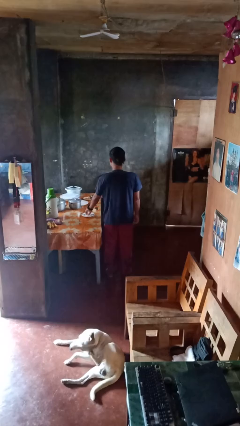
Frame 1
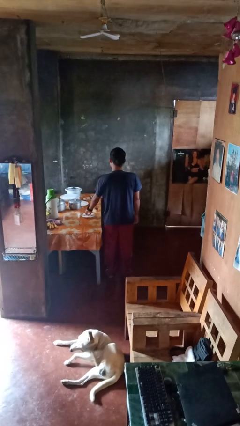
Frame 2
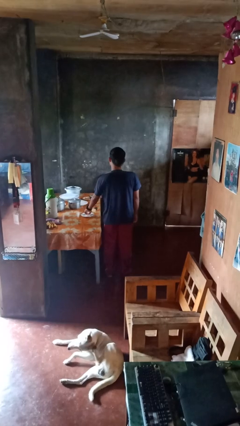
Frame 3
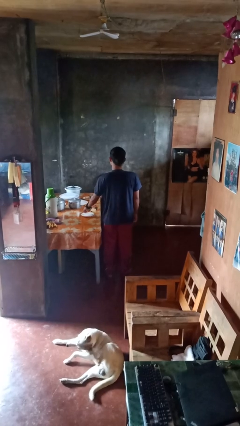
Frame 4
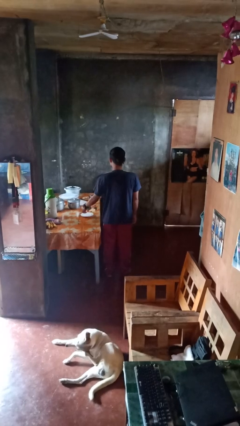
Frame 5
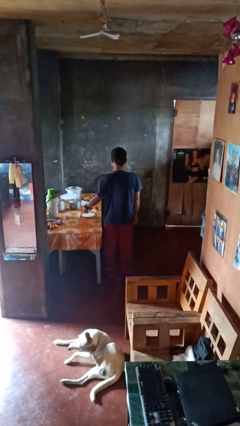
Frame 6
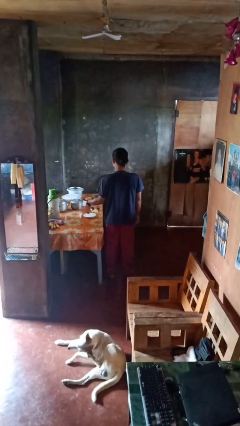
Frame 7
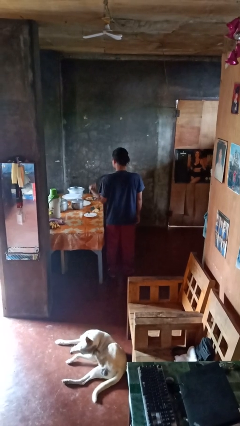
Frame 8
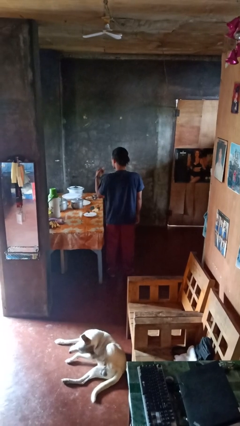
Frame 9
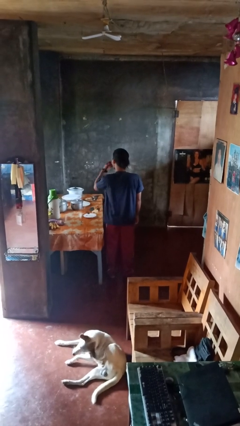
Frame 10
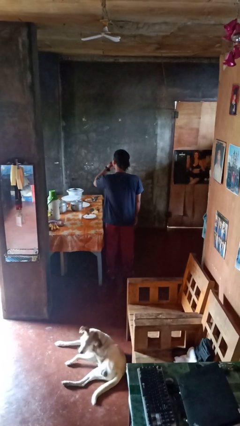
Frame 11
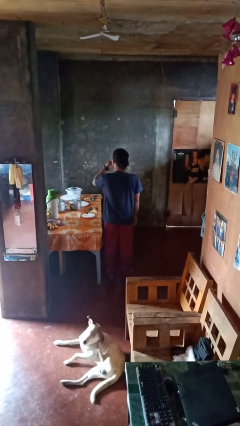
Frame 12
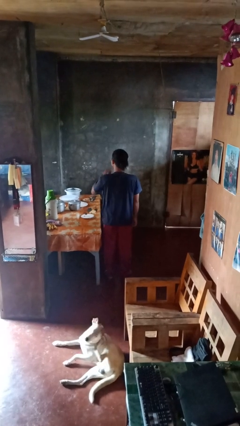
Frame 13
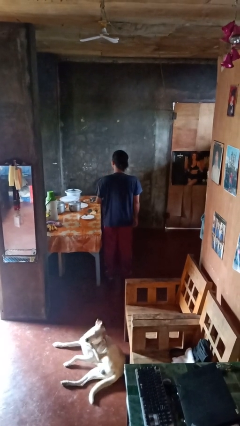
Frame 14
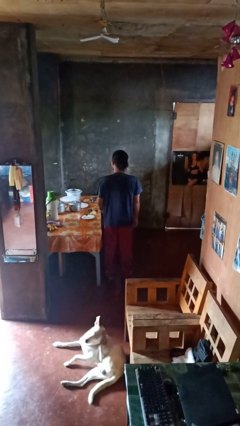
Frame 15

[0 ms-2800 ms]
person eats with hands

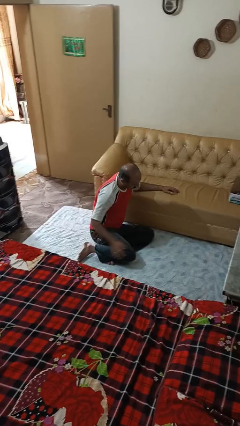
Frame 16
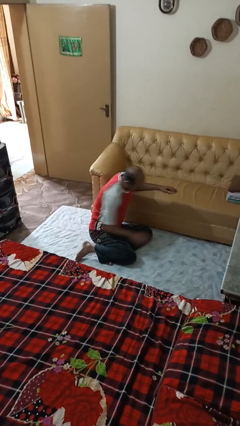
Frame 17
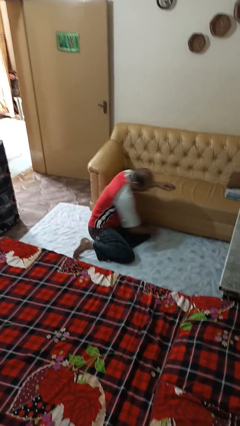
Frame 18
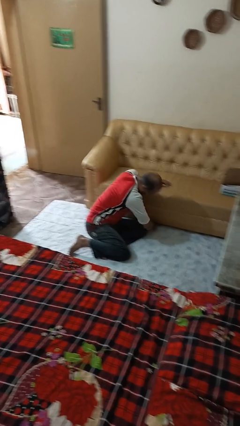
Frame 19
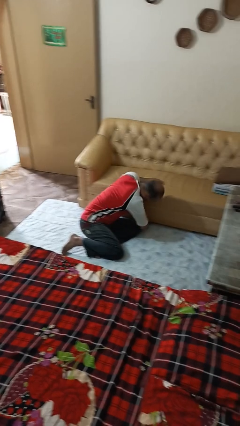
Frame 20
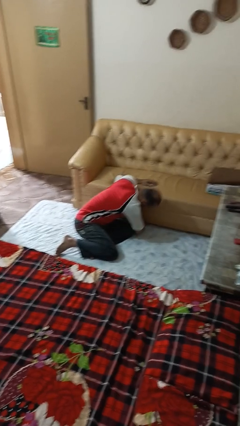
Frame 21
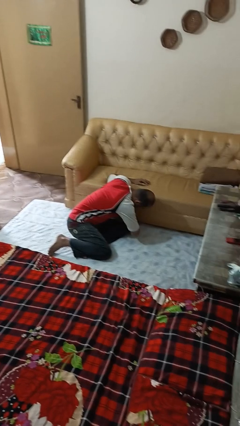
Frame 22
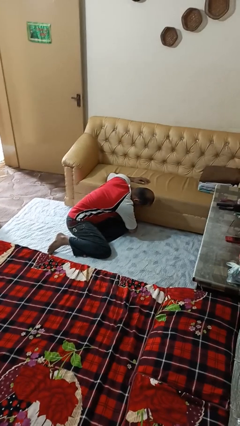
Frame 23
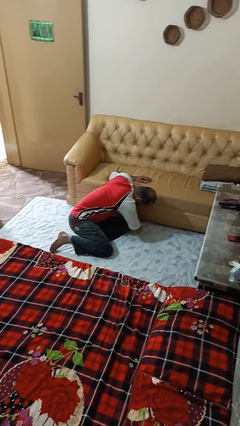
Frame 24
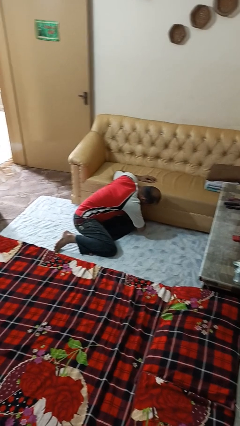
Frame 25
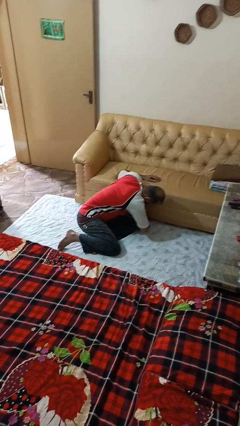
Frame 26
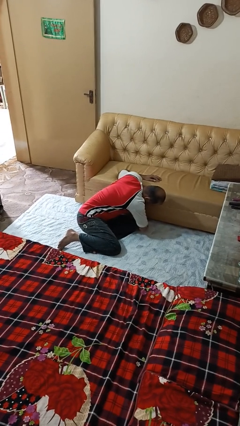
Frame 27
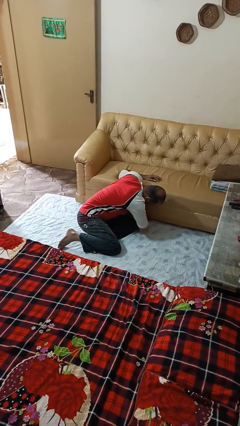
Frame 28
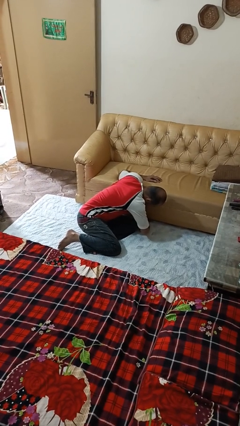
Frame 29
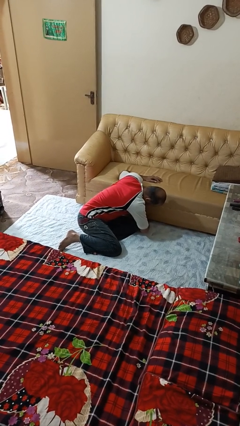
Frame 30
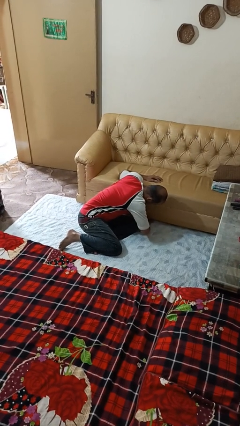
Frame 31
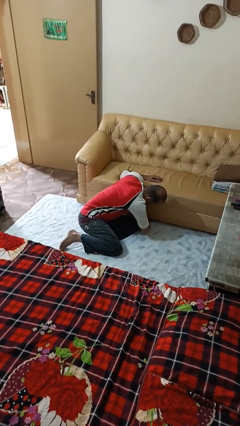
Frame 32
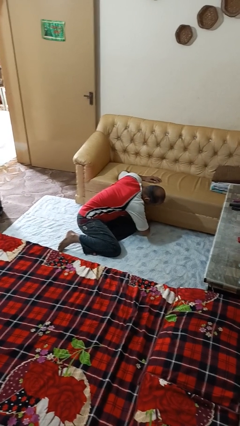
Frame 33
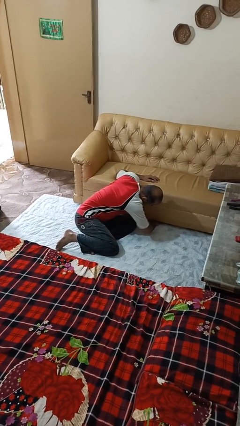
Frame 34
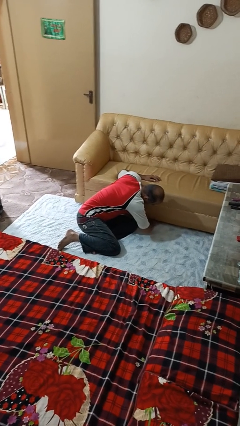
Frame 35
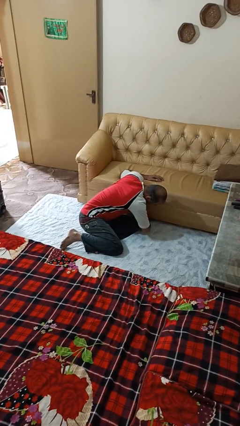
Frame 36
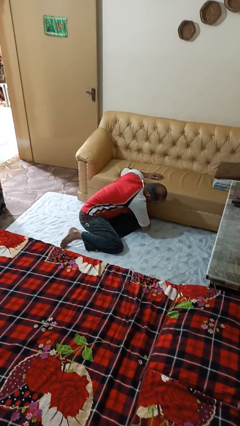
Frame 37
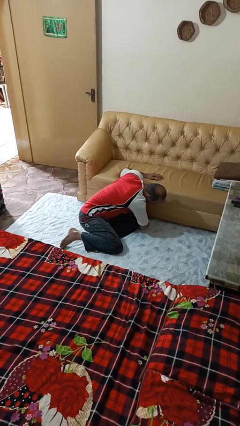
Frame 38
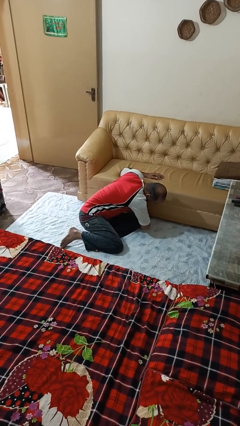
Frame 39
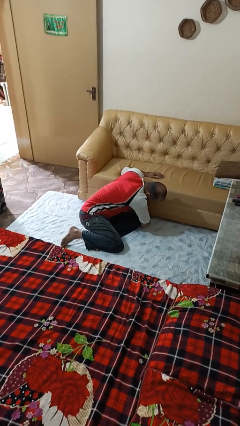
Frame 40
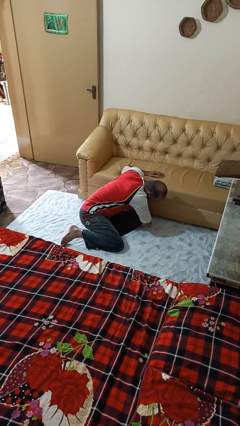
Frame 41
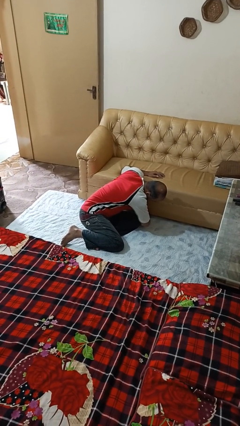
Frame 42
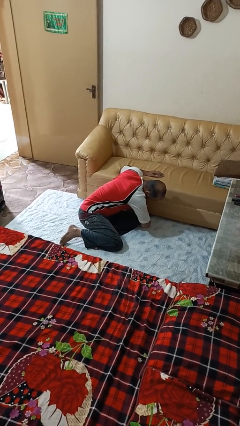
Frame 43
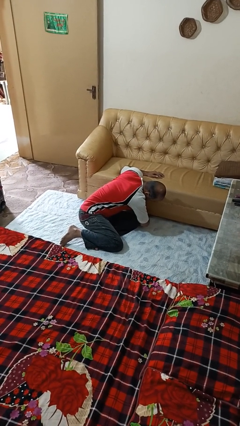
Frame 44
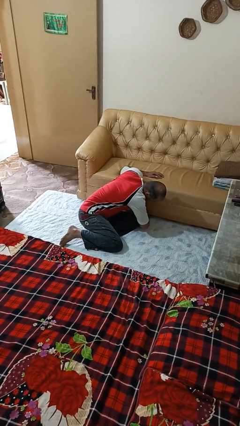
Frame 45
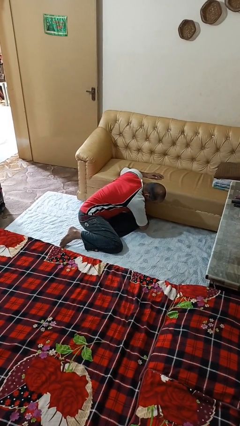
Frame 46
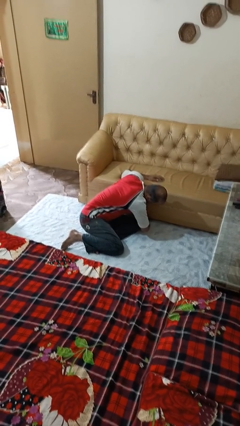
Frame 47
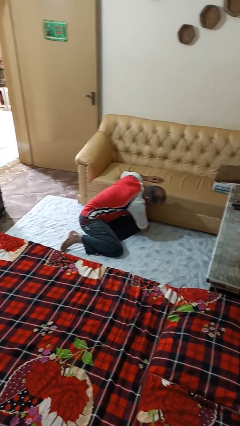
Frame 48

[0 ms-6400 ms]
person searches under couch

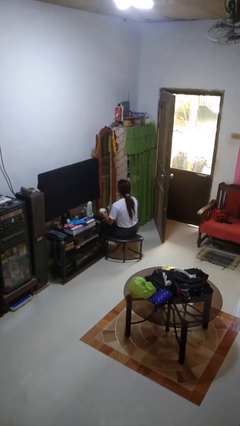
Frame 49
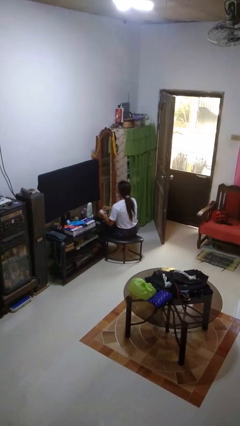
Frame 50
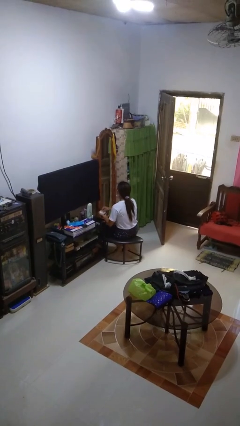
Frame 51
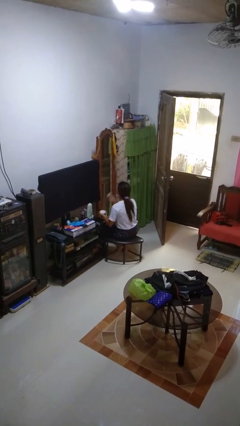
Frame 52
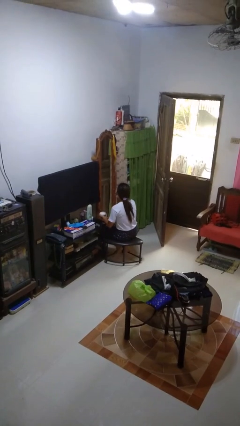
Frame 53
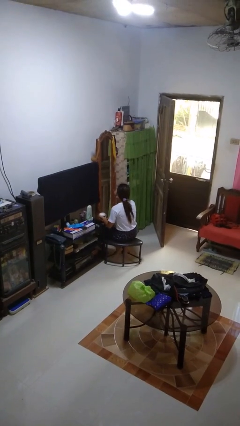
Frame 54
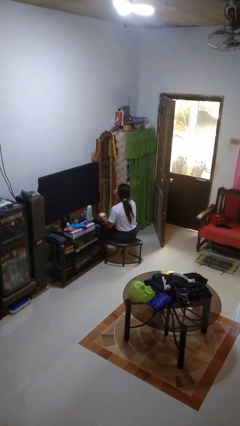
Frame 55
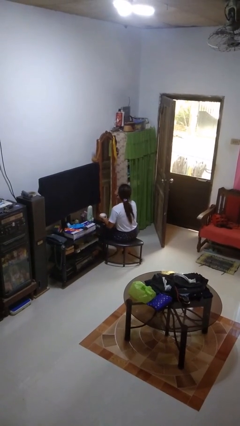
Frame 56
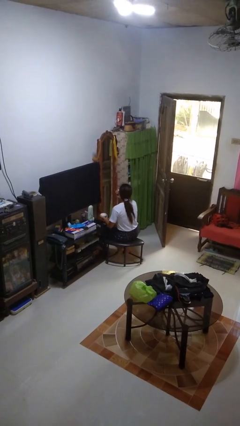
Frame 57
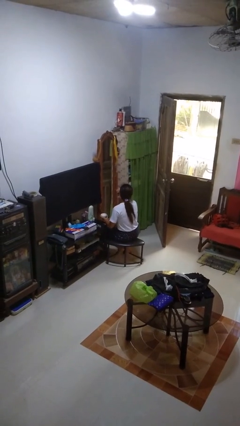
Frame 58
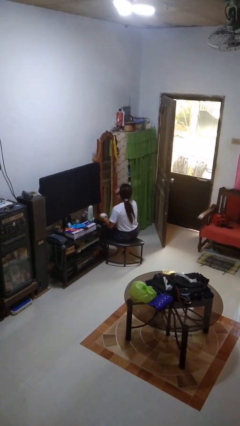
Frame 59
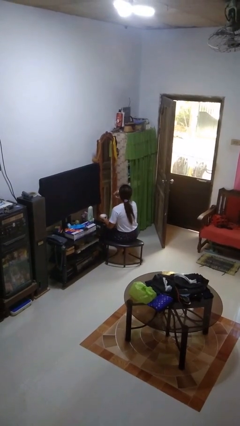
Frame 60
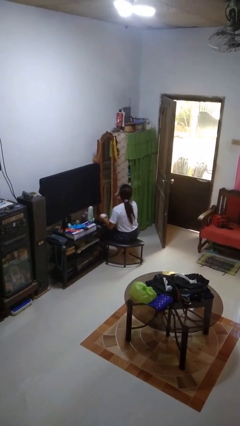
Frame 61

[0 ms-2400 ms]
person applies foundation makeup

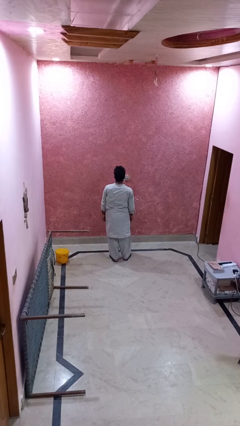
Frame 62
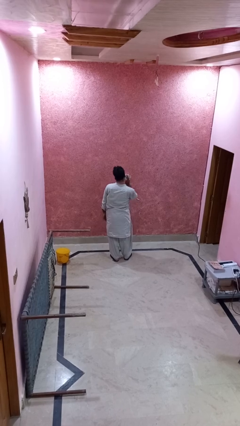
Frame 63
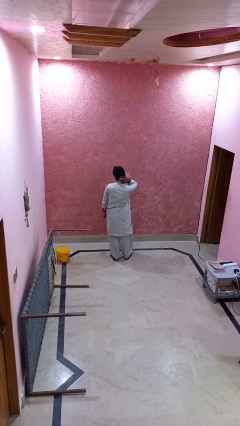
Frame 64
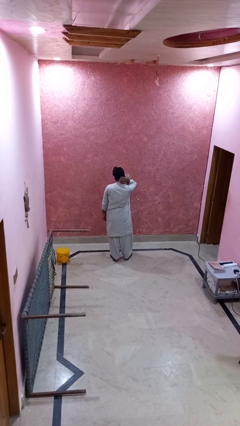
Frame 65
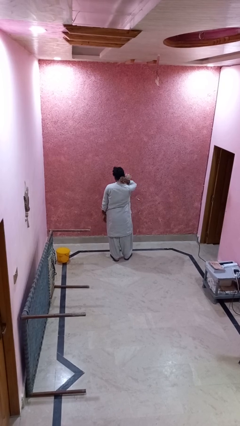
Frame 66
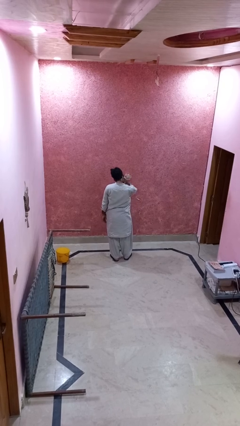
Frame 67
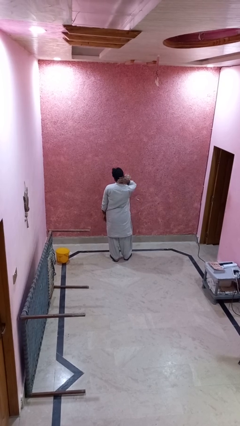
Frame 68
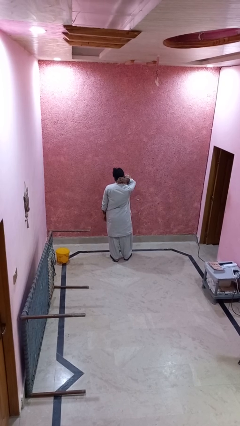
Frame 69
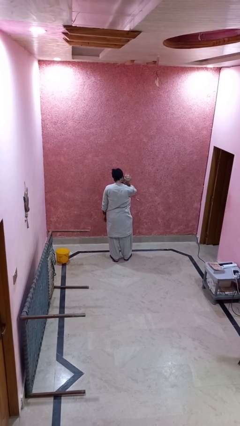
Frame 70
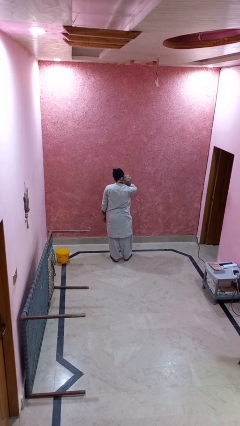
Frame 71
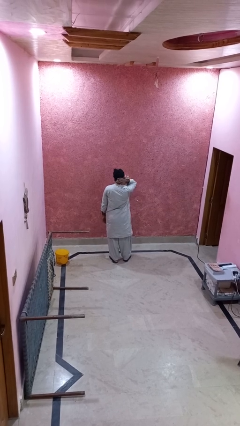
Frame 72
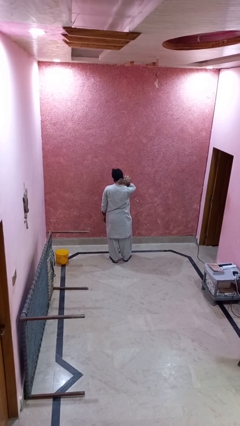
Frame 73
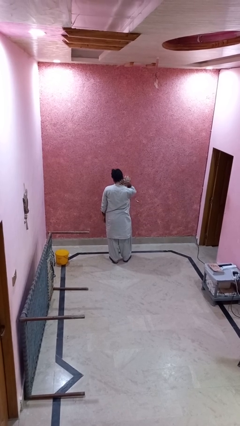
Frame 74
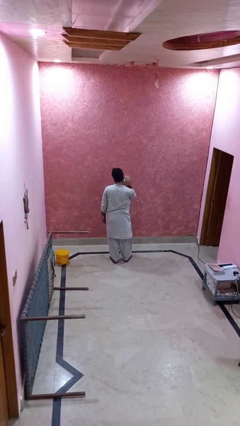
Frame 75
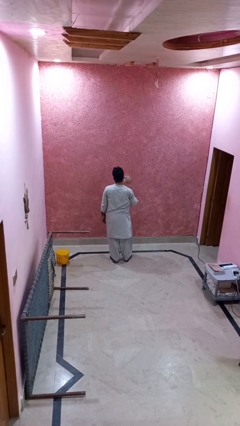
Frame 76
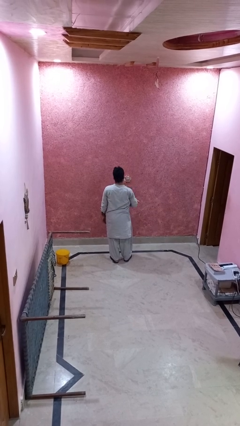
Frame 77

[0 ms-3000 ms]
person rubs neck

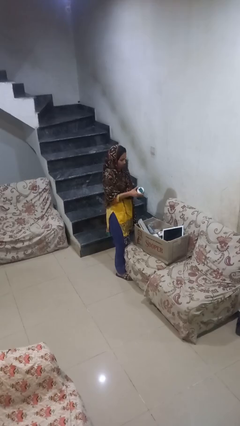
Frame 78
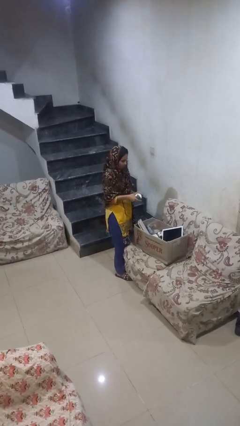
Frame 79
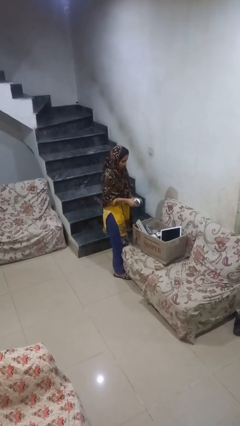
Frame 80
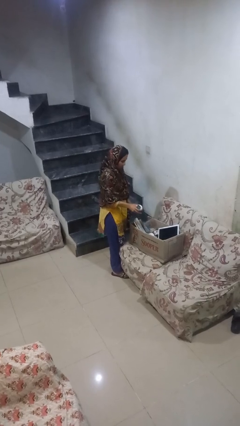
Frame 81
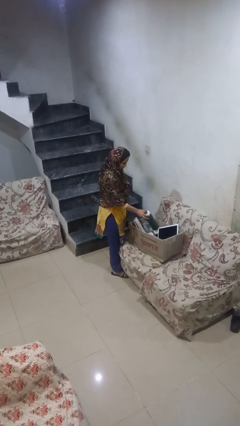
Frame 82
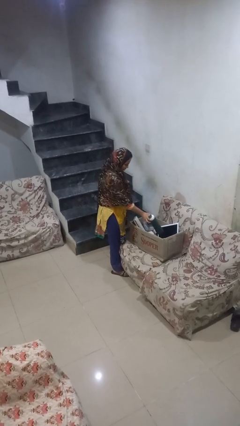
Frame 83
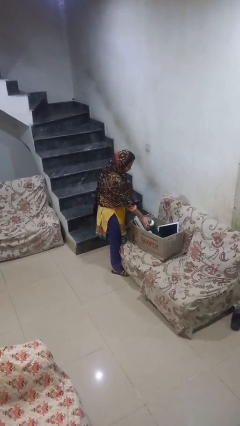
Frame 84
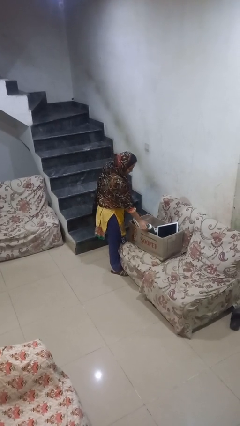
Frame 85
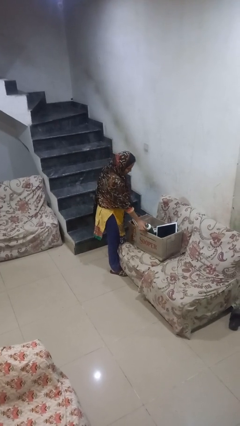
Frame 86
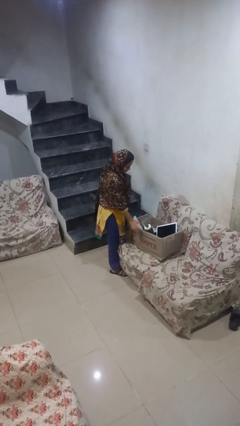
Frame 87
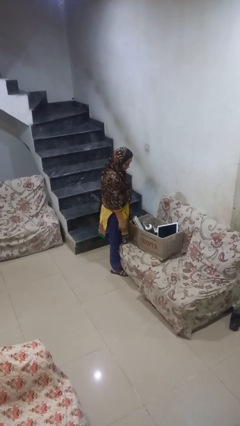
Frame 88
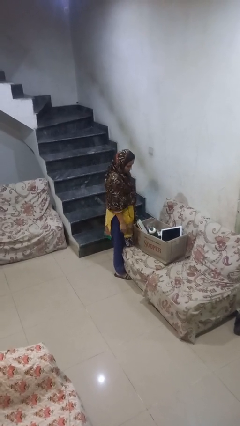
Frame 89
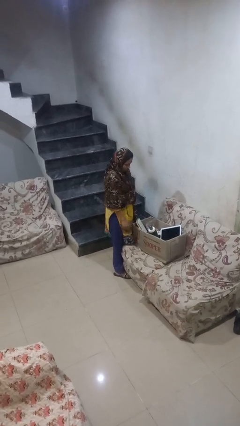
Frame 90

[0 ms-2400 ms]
person puts object into box

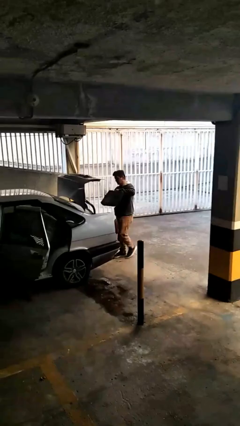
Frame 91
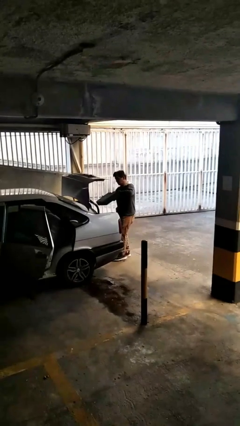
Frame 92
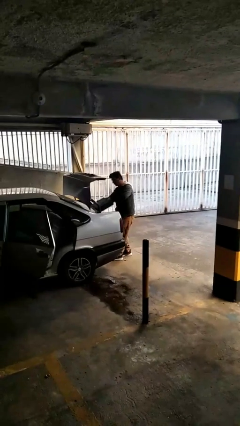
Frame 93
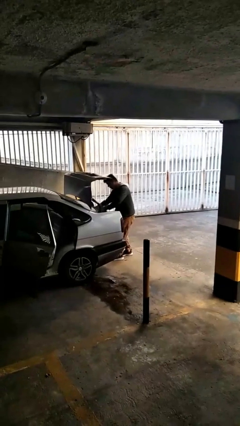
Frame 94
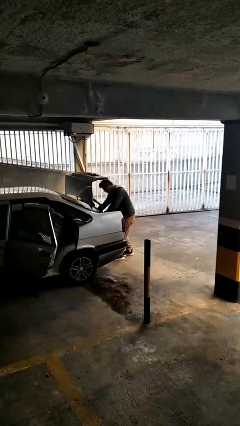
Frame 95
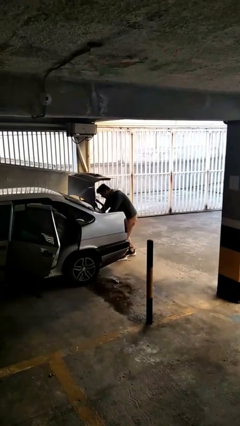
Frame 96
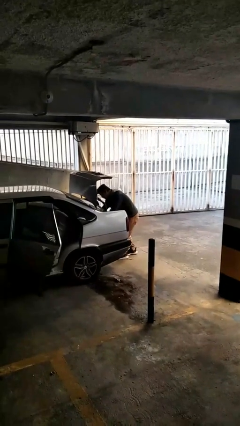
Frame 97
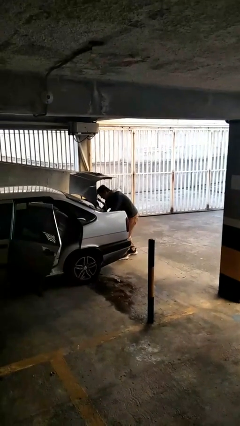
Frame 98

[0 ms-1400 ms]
person loads car
